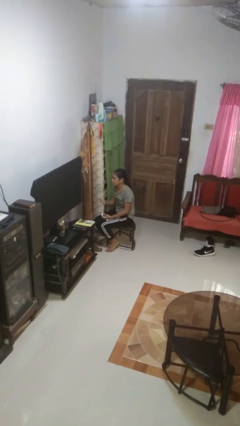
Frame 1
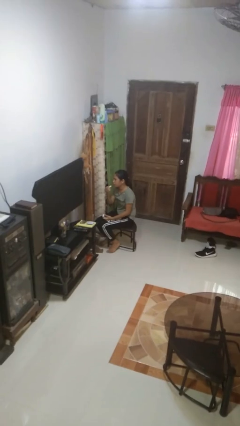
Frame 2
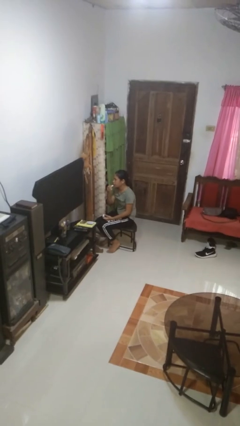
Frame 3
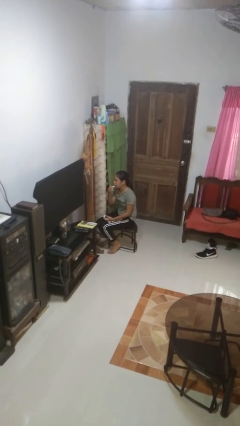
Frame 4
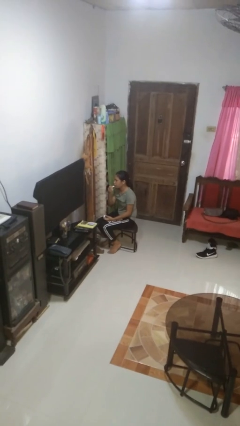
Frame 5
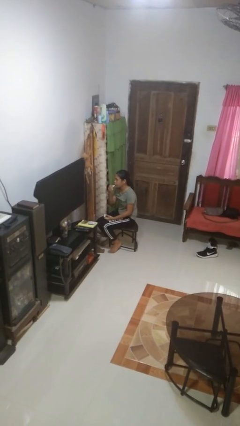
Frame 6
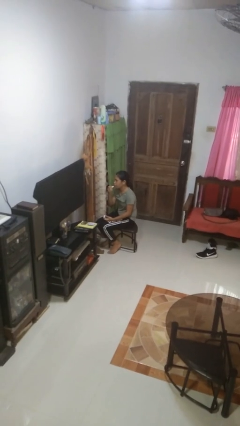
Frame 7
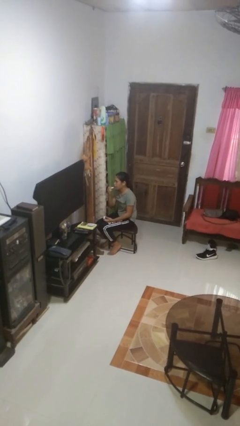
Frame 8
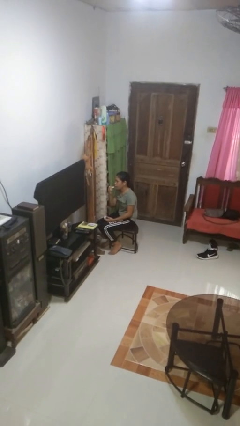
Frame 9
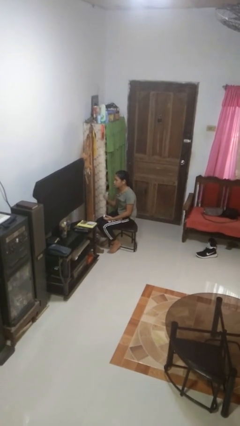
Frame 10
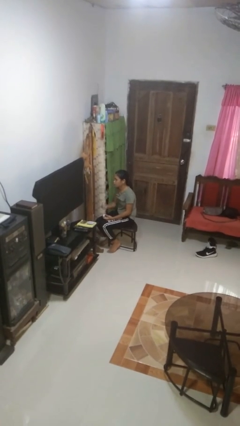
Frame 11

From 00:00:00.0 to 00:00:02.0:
person applies lip makeup

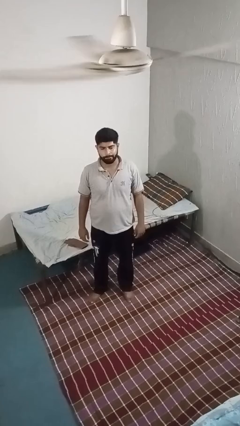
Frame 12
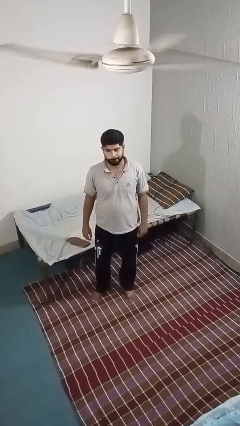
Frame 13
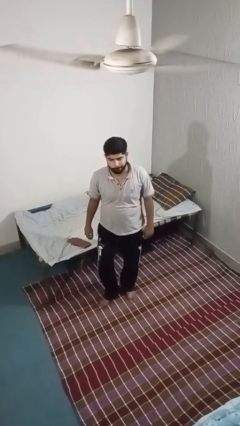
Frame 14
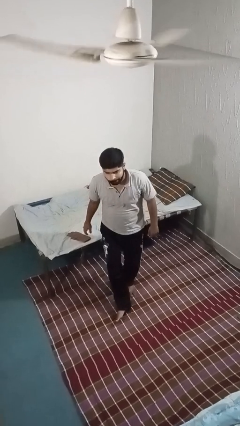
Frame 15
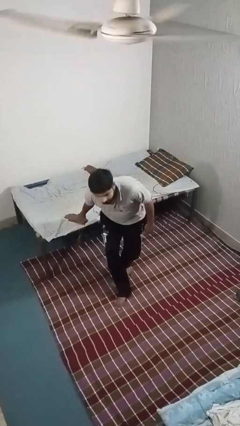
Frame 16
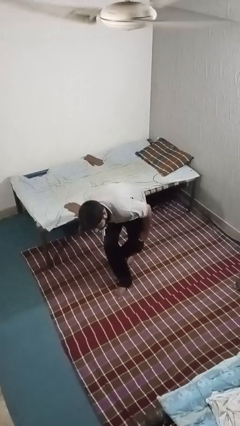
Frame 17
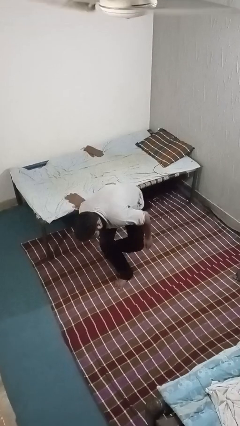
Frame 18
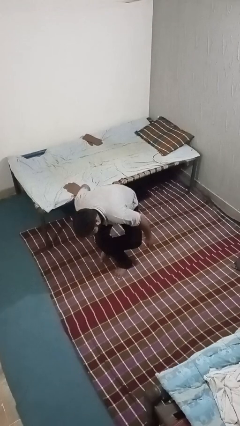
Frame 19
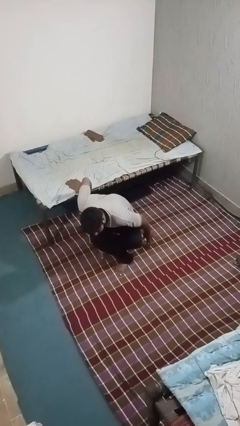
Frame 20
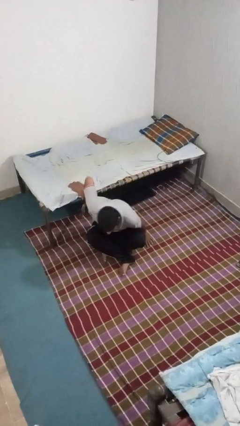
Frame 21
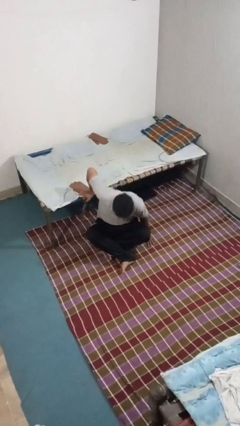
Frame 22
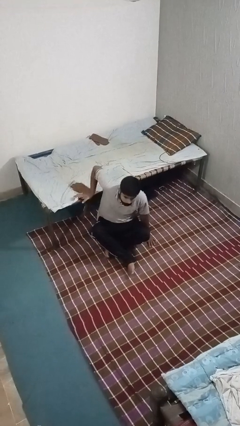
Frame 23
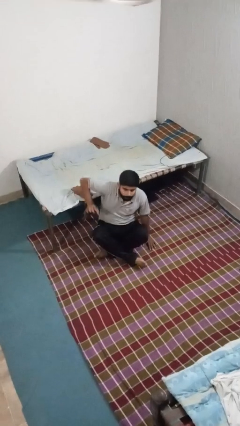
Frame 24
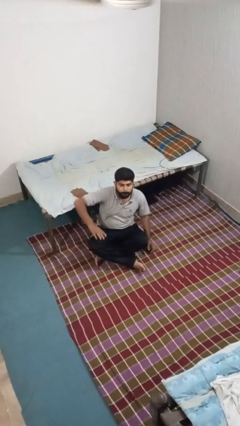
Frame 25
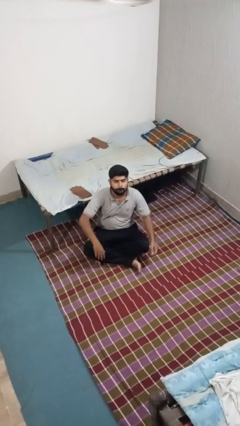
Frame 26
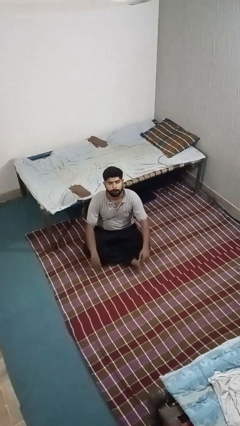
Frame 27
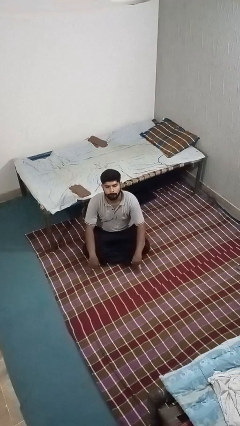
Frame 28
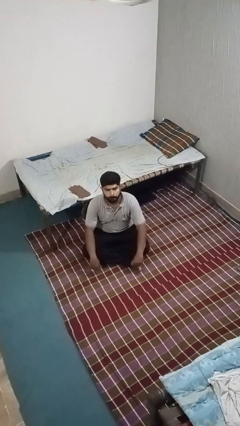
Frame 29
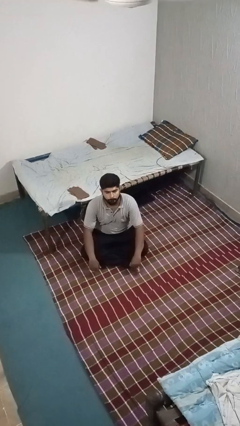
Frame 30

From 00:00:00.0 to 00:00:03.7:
person sits crisscross

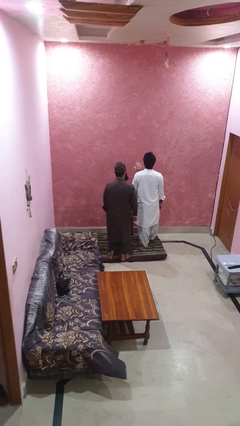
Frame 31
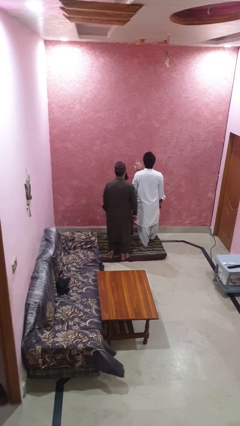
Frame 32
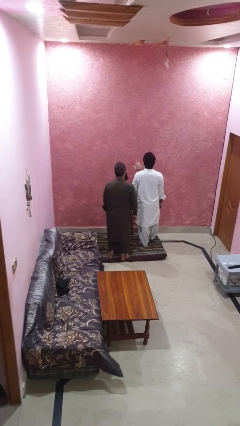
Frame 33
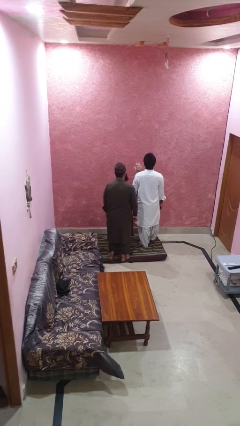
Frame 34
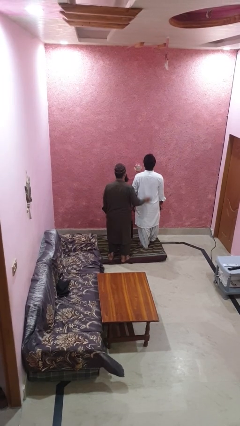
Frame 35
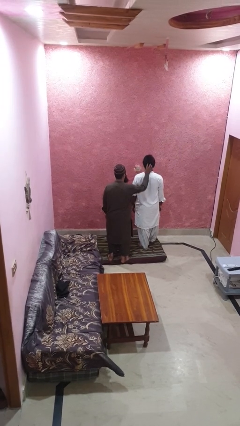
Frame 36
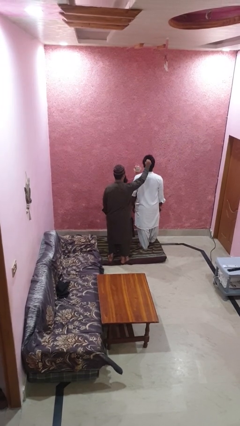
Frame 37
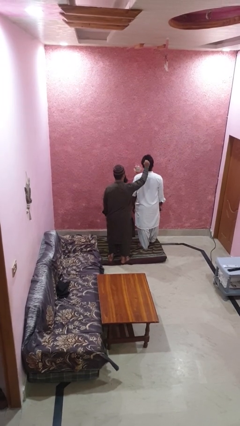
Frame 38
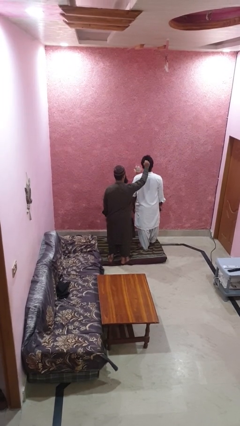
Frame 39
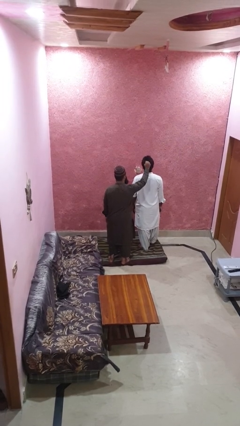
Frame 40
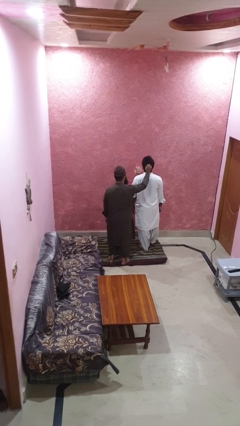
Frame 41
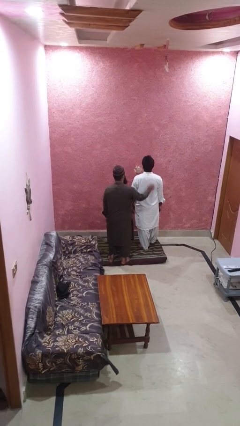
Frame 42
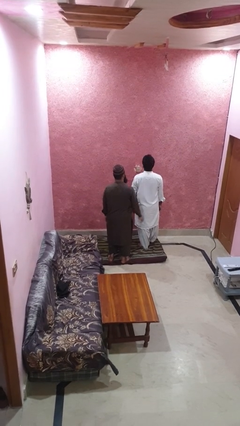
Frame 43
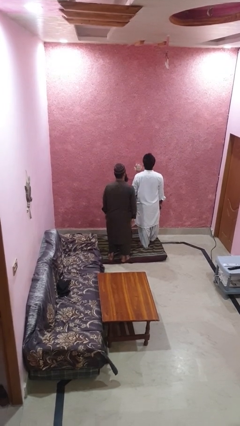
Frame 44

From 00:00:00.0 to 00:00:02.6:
person grabs person by hair

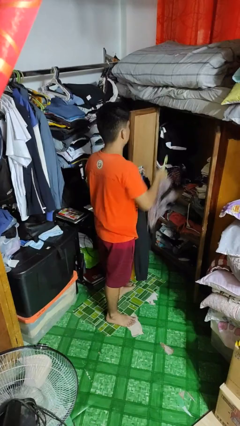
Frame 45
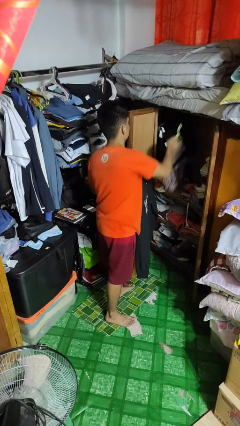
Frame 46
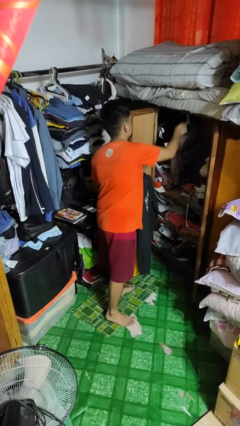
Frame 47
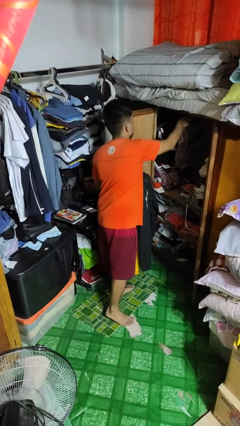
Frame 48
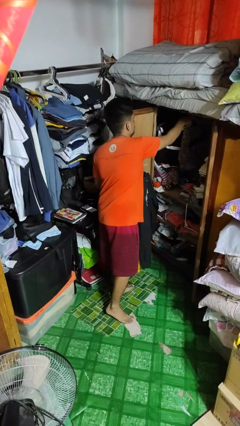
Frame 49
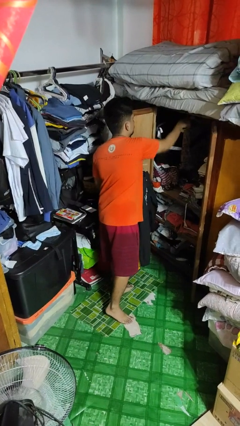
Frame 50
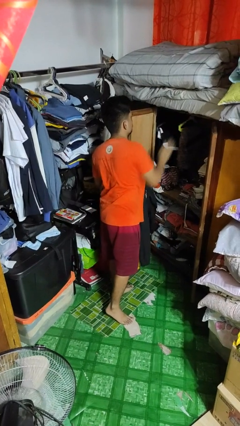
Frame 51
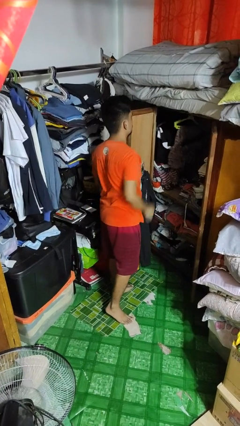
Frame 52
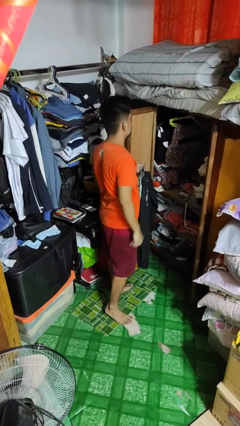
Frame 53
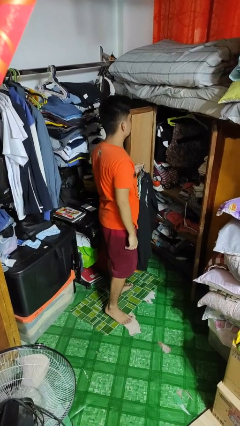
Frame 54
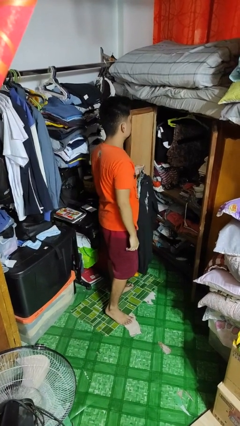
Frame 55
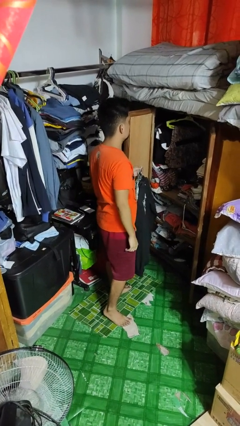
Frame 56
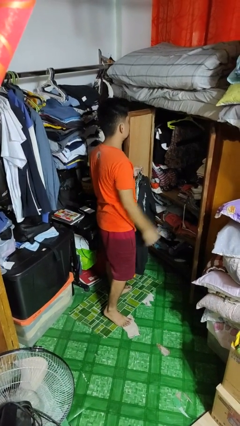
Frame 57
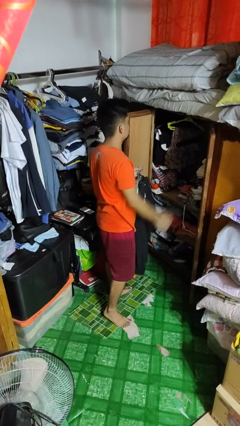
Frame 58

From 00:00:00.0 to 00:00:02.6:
person puts clothes into closet

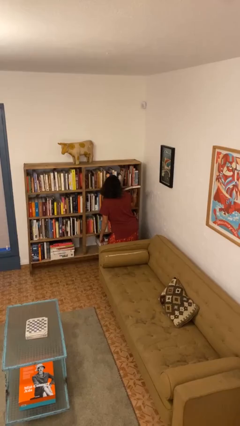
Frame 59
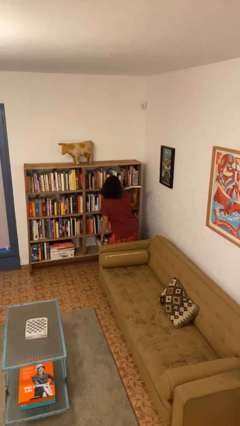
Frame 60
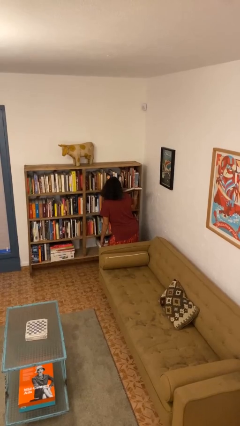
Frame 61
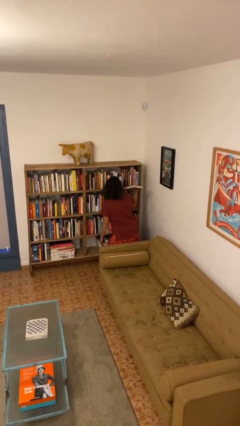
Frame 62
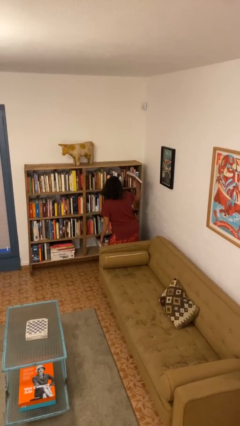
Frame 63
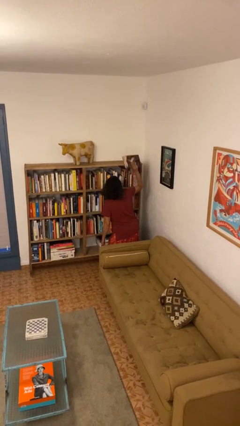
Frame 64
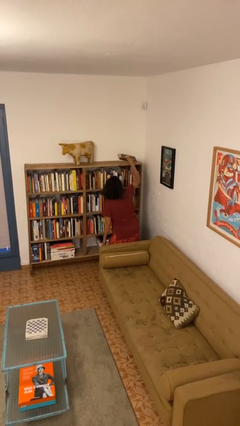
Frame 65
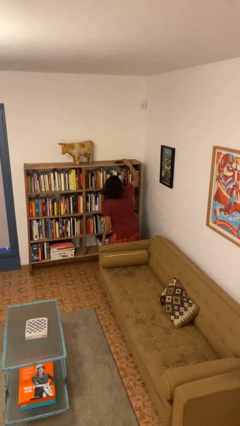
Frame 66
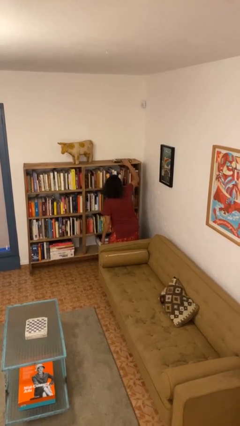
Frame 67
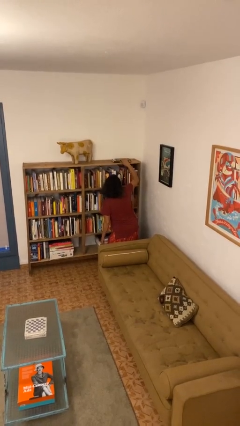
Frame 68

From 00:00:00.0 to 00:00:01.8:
person puts down object on shelf

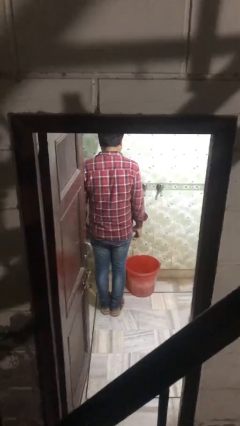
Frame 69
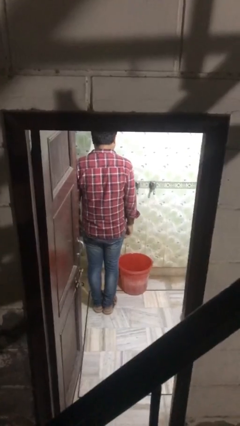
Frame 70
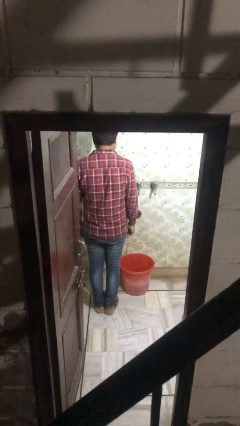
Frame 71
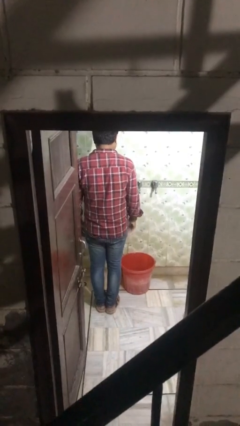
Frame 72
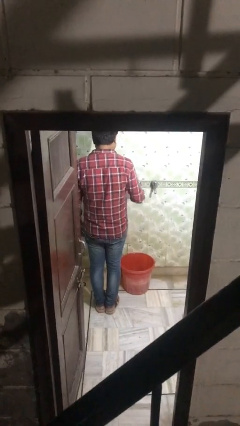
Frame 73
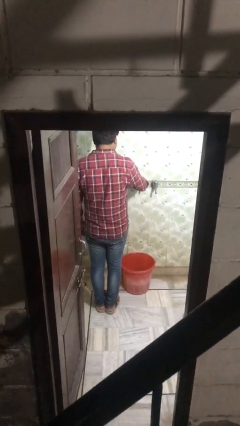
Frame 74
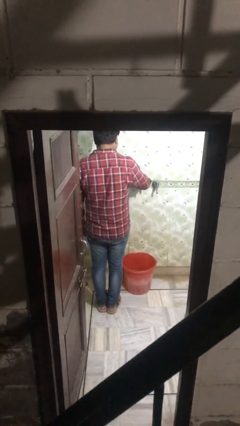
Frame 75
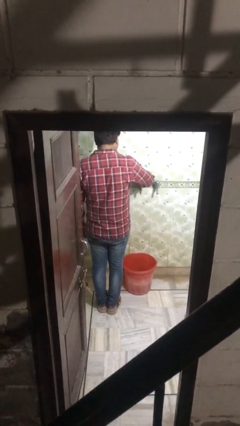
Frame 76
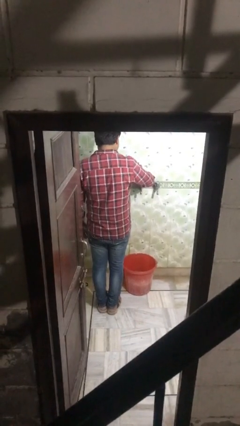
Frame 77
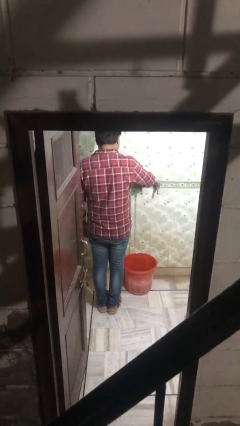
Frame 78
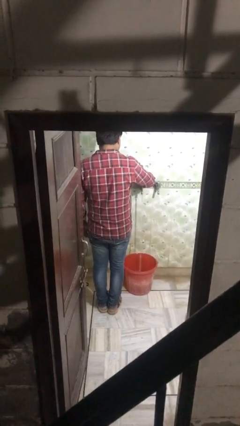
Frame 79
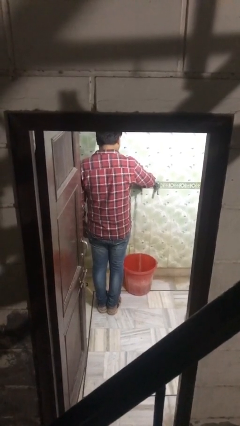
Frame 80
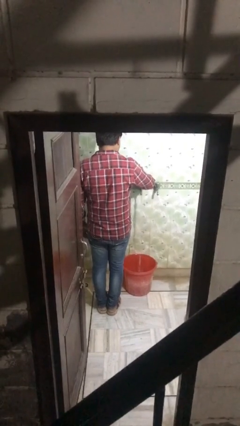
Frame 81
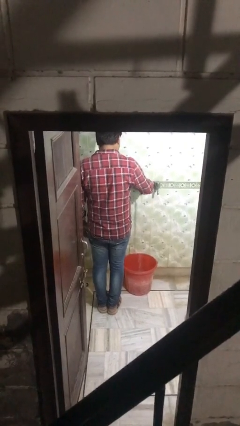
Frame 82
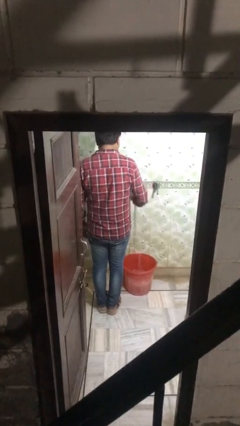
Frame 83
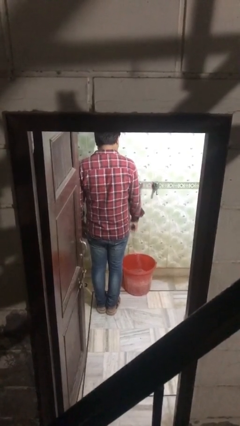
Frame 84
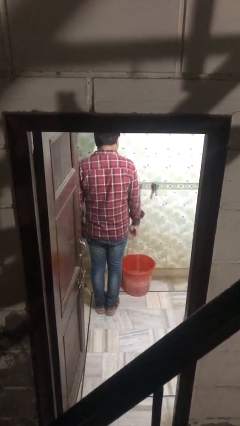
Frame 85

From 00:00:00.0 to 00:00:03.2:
person turns on faucet

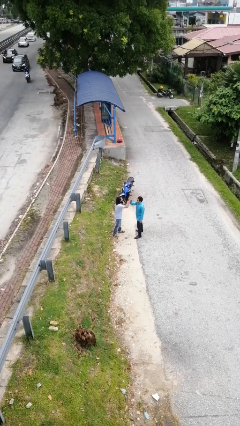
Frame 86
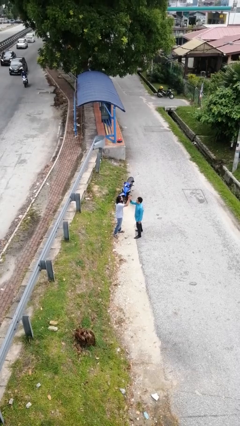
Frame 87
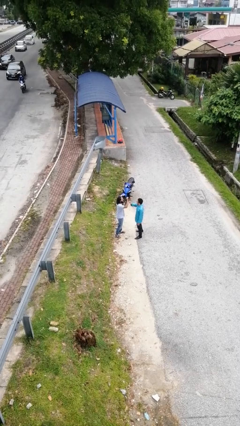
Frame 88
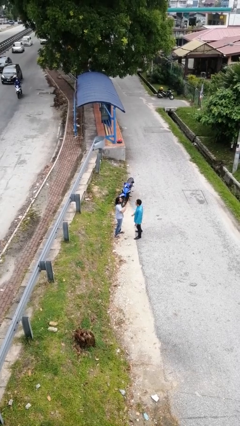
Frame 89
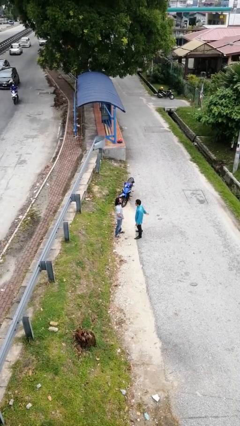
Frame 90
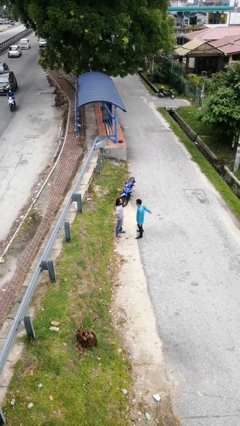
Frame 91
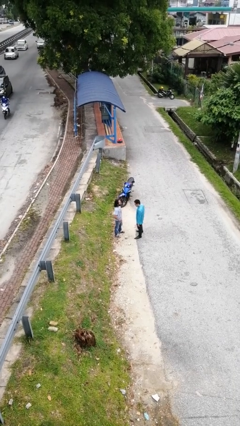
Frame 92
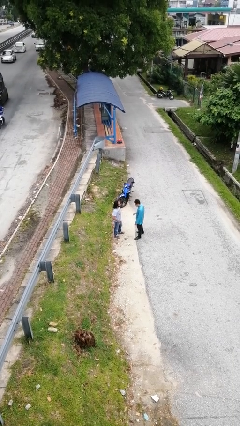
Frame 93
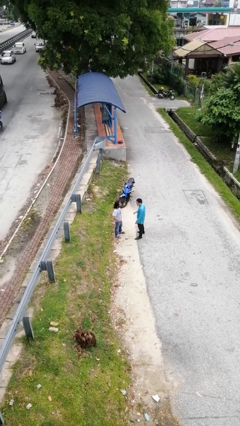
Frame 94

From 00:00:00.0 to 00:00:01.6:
person highfives hand
